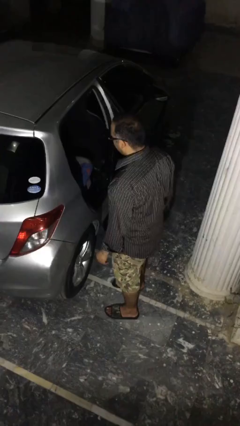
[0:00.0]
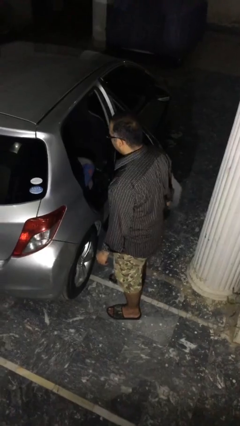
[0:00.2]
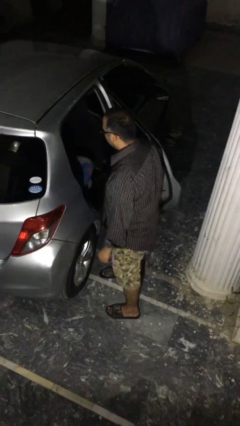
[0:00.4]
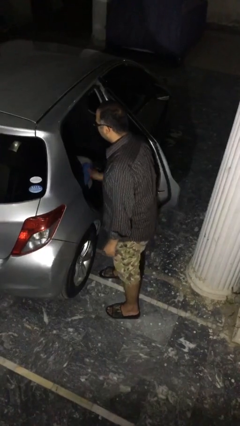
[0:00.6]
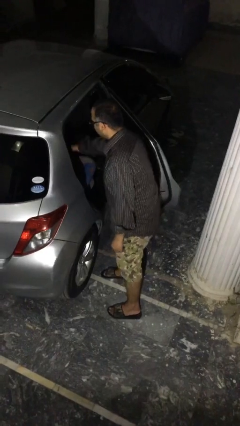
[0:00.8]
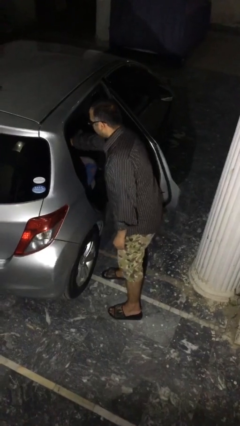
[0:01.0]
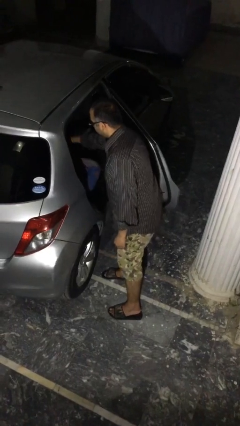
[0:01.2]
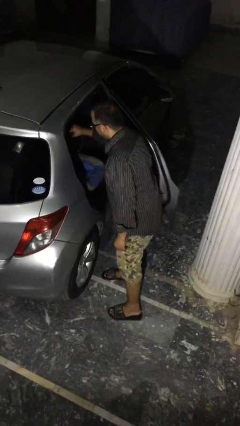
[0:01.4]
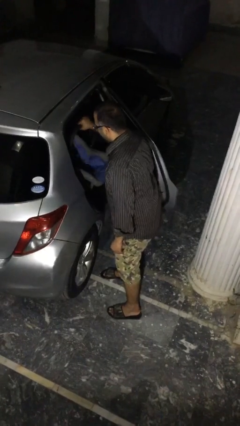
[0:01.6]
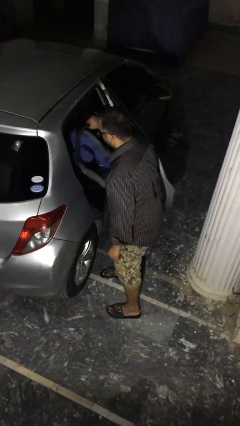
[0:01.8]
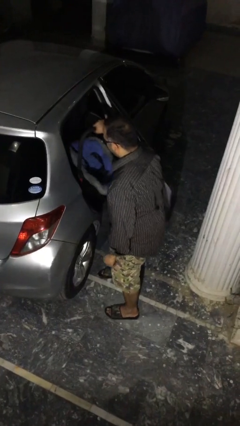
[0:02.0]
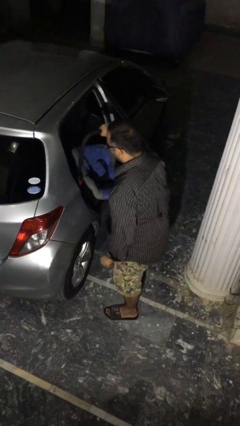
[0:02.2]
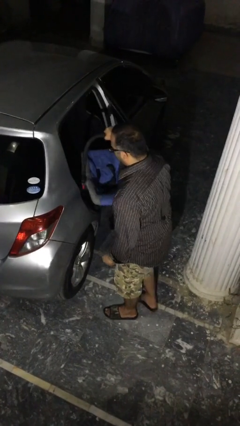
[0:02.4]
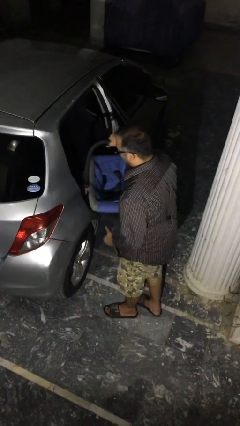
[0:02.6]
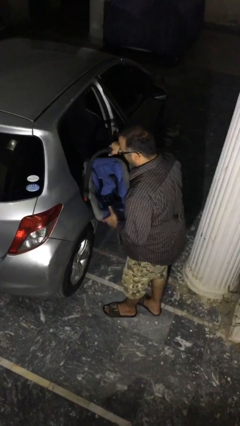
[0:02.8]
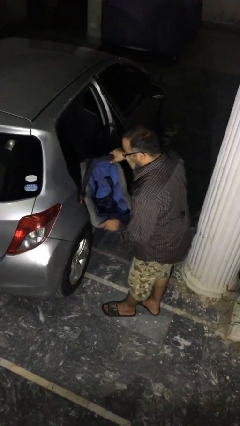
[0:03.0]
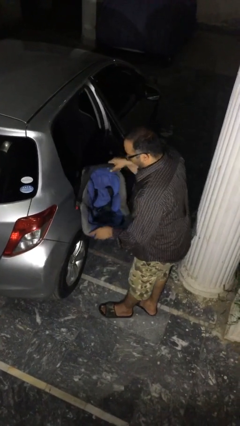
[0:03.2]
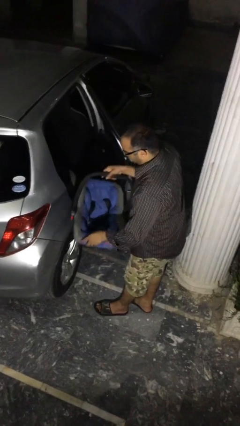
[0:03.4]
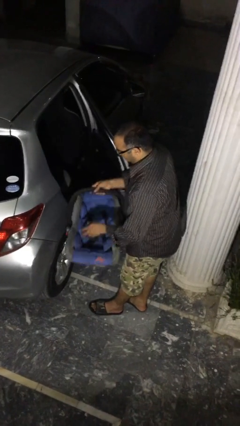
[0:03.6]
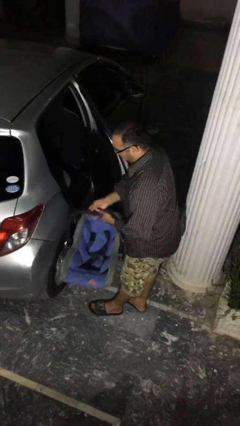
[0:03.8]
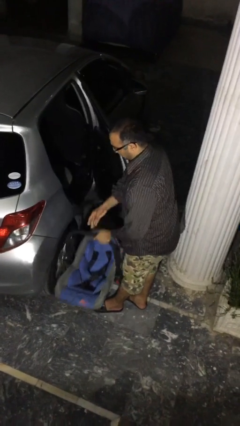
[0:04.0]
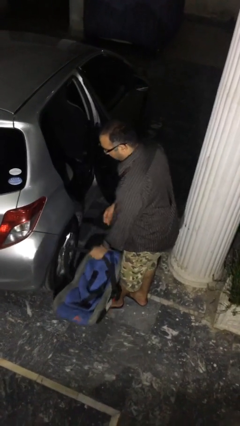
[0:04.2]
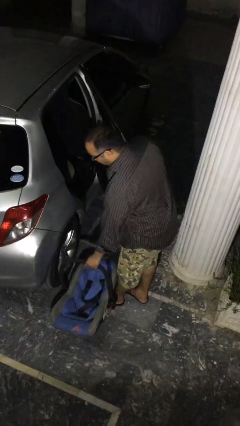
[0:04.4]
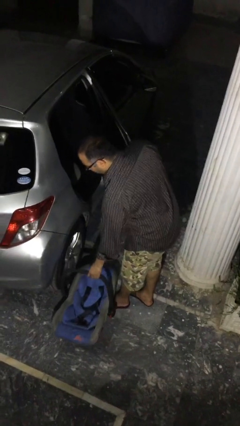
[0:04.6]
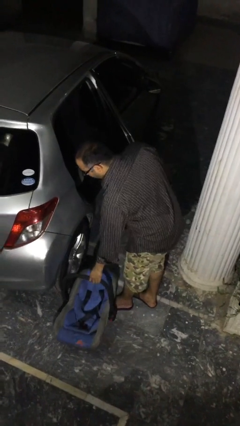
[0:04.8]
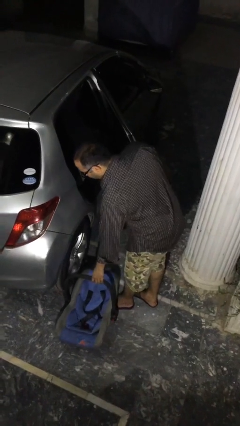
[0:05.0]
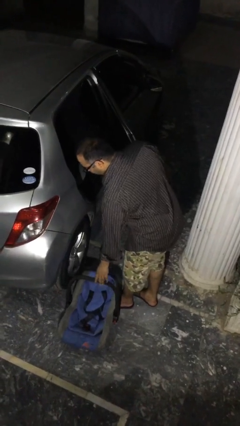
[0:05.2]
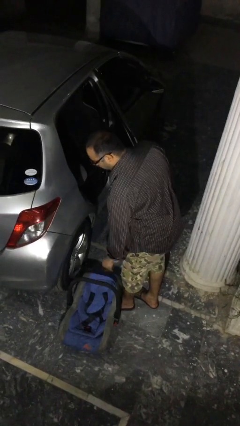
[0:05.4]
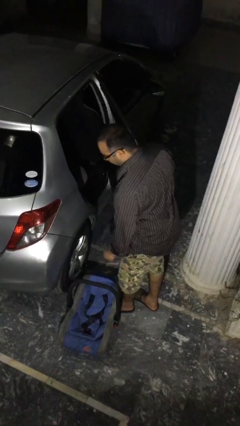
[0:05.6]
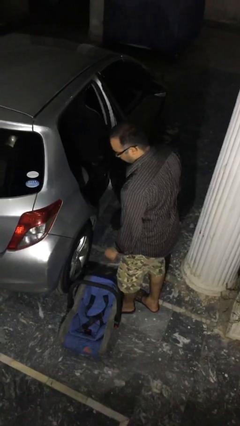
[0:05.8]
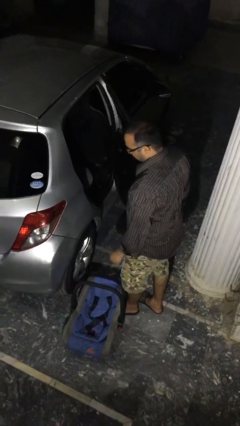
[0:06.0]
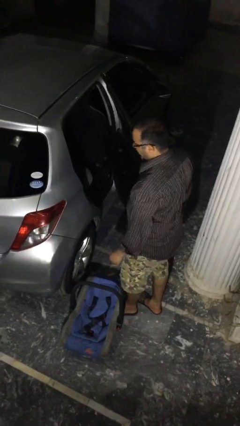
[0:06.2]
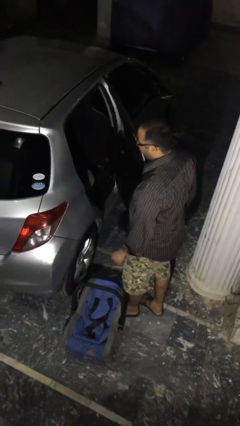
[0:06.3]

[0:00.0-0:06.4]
person unloads car

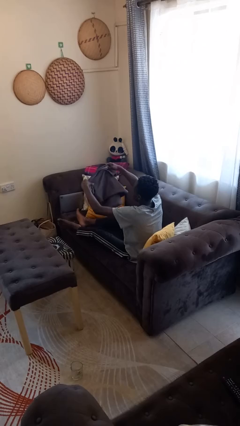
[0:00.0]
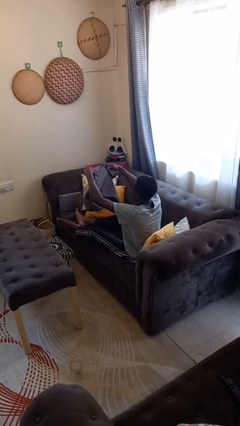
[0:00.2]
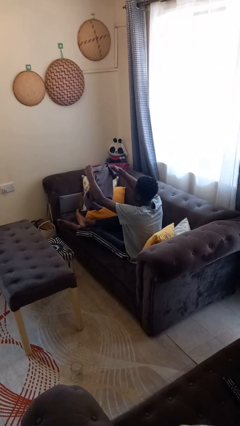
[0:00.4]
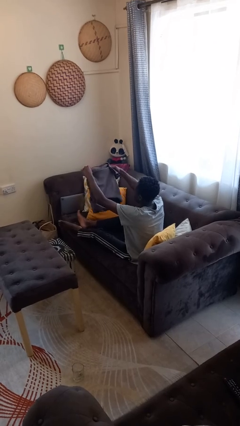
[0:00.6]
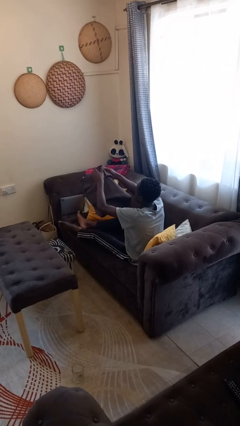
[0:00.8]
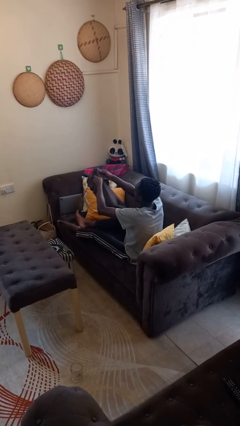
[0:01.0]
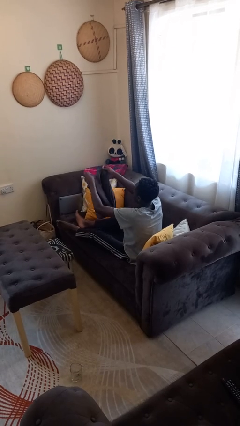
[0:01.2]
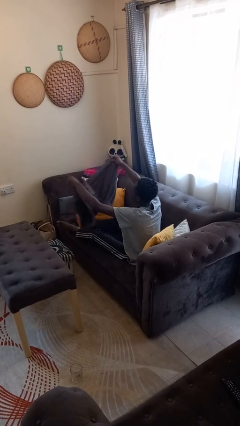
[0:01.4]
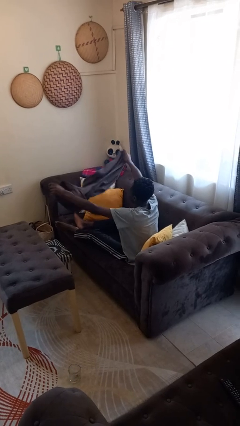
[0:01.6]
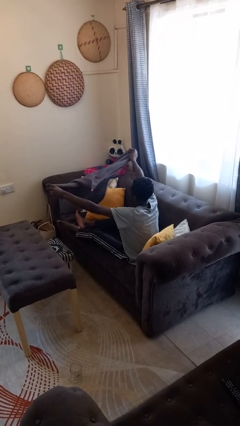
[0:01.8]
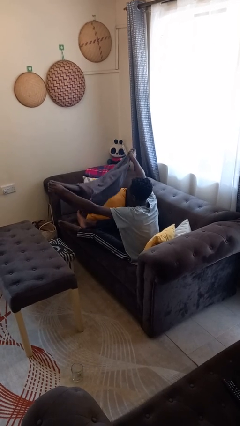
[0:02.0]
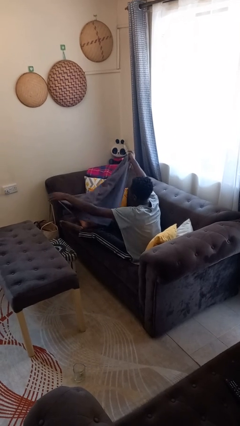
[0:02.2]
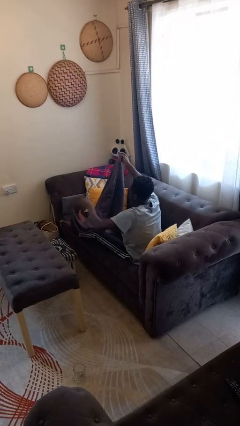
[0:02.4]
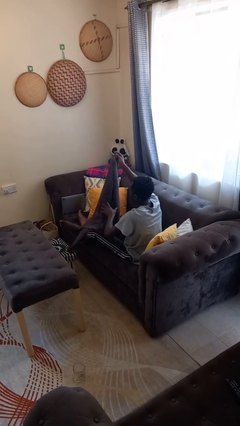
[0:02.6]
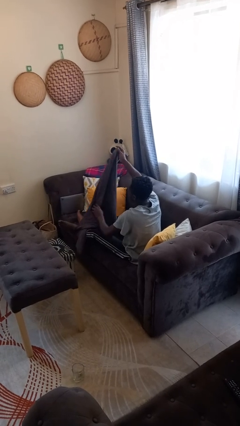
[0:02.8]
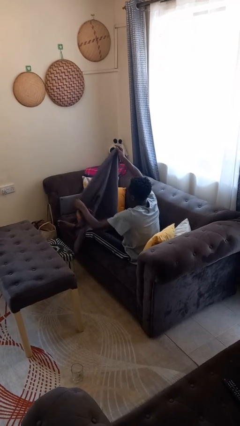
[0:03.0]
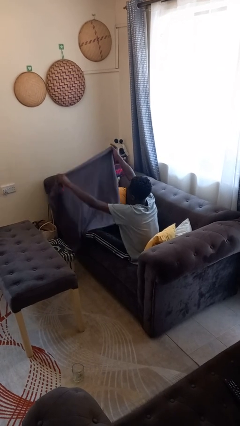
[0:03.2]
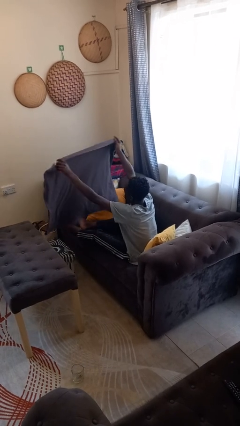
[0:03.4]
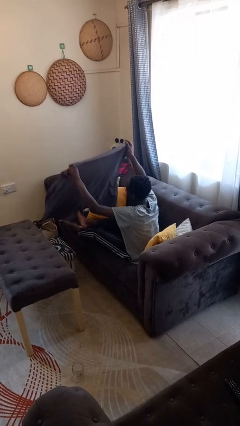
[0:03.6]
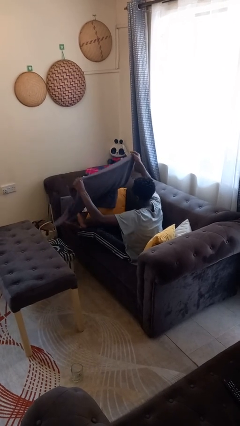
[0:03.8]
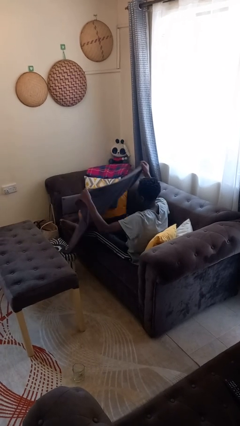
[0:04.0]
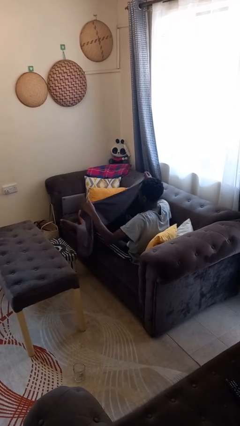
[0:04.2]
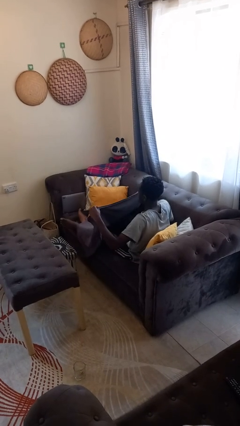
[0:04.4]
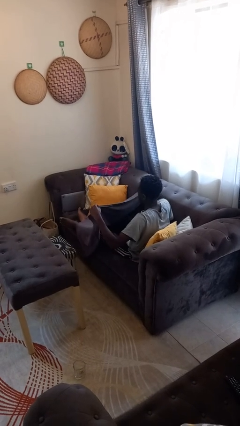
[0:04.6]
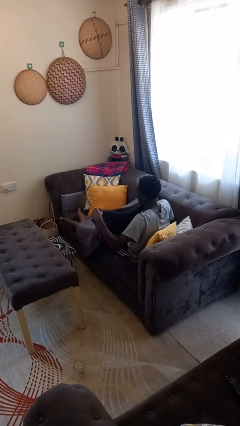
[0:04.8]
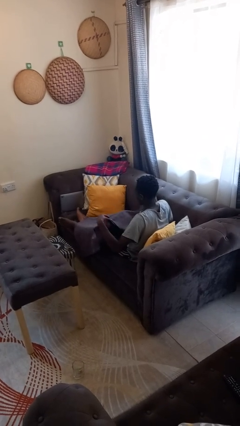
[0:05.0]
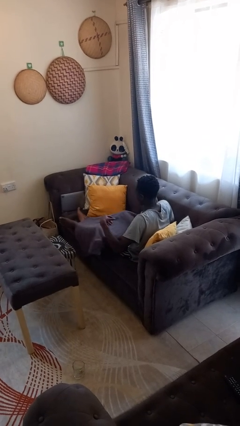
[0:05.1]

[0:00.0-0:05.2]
person unfolds blanket

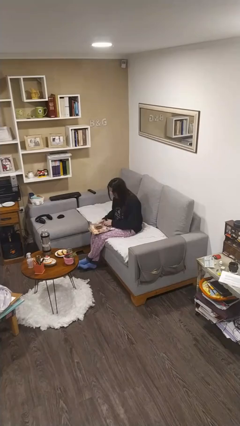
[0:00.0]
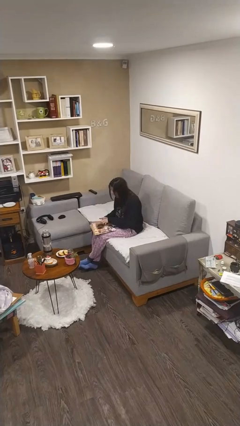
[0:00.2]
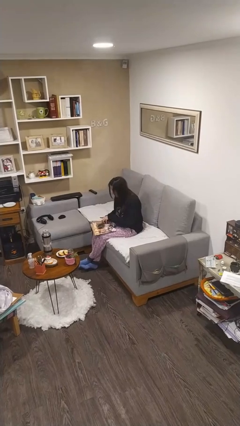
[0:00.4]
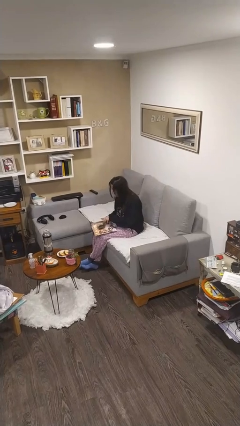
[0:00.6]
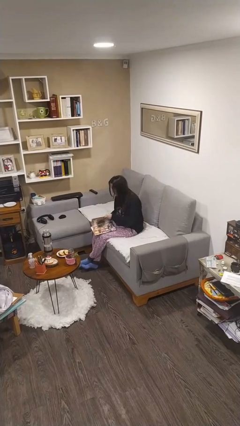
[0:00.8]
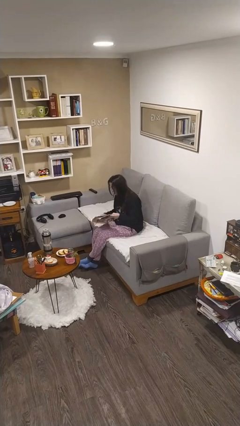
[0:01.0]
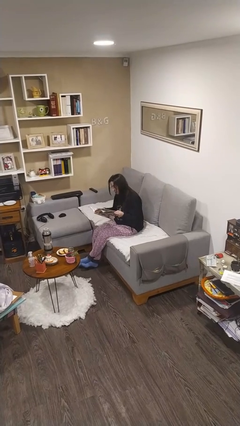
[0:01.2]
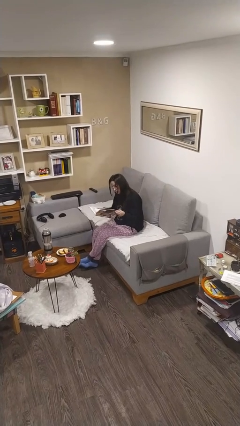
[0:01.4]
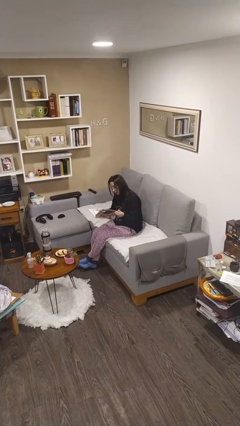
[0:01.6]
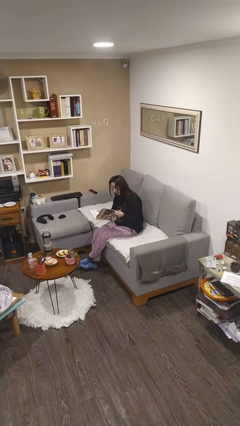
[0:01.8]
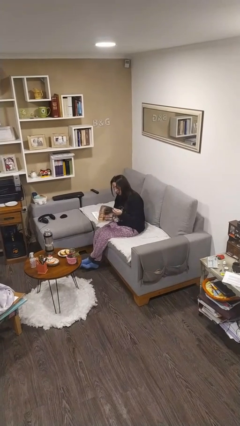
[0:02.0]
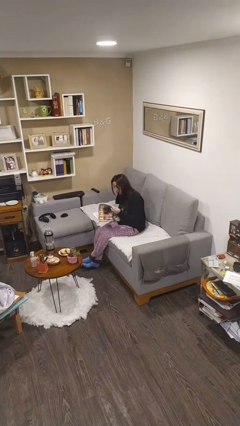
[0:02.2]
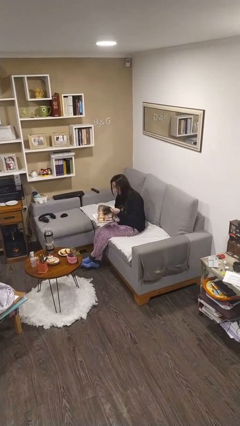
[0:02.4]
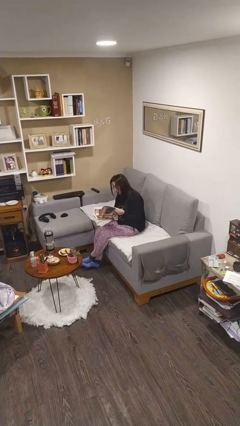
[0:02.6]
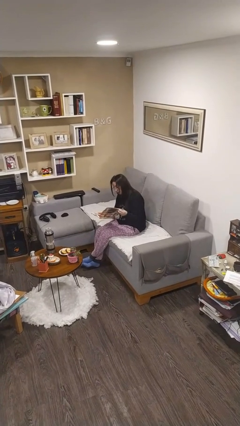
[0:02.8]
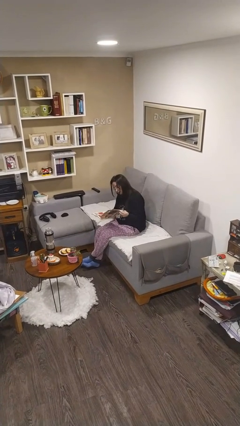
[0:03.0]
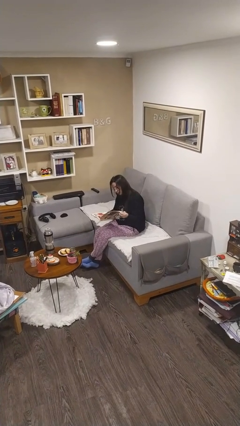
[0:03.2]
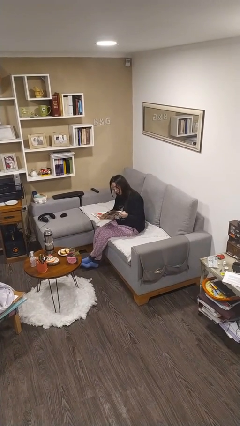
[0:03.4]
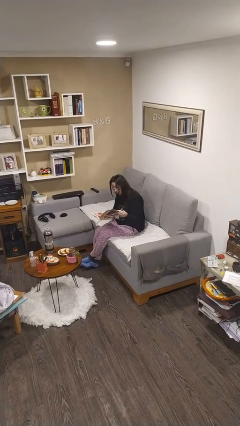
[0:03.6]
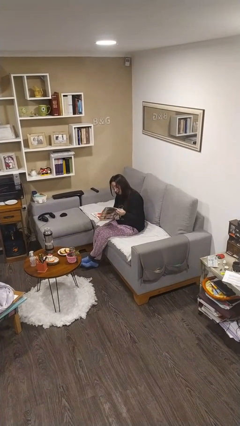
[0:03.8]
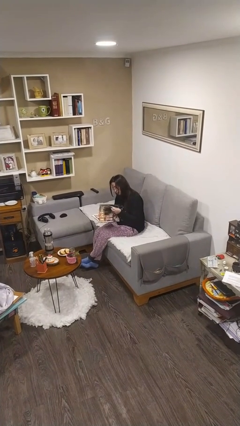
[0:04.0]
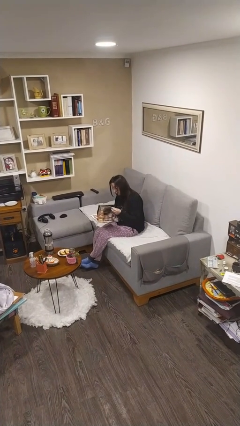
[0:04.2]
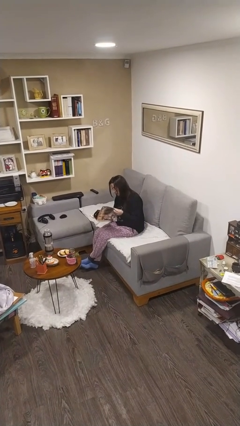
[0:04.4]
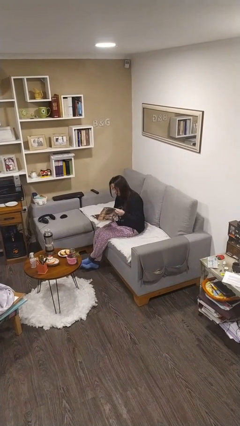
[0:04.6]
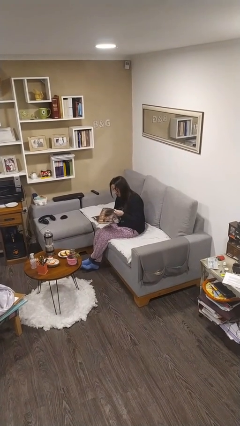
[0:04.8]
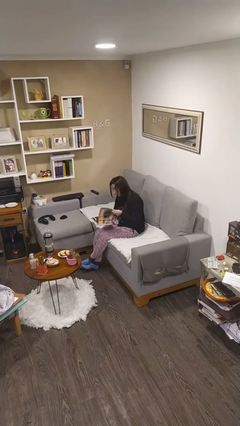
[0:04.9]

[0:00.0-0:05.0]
person reads magazine

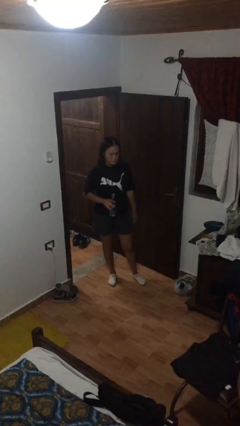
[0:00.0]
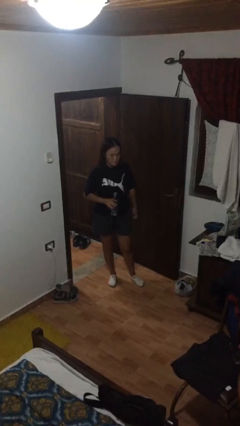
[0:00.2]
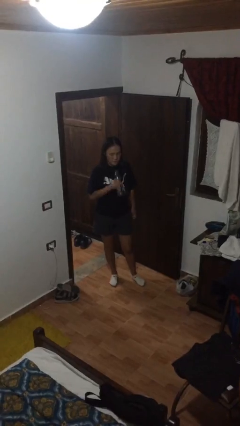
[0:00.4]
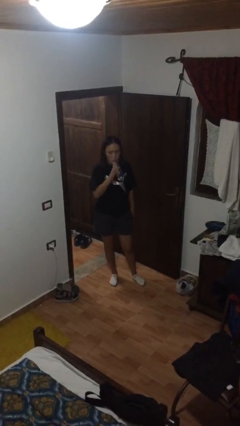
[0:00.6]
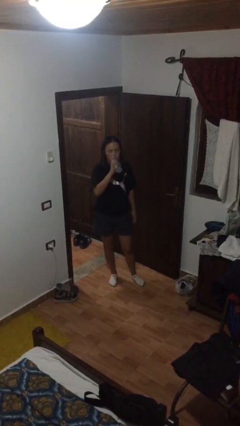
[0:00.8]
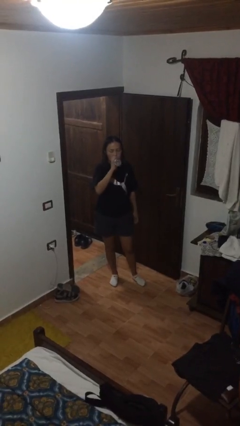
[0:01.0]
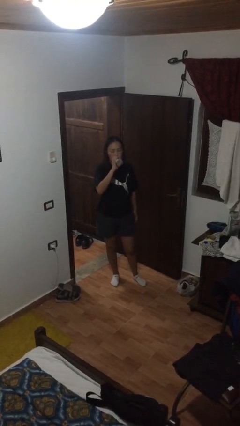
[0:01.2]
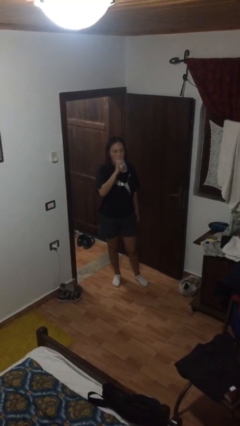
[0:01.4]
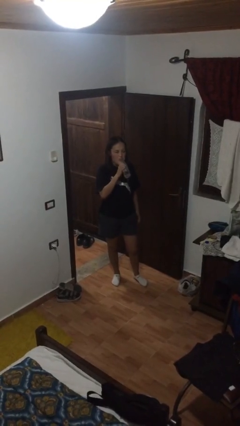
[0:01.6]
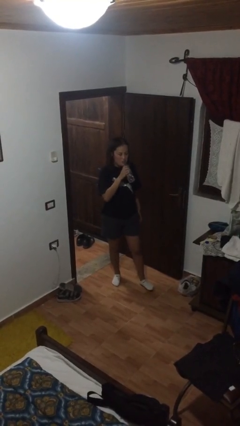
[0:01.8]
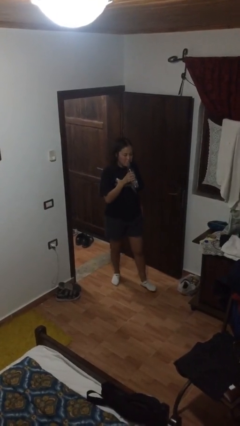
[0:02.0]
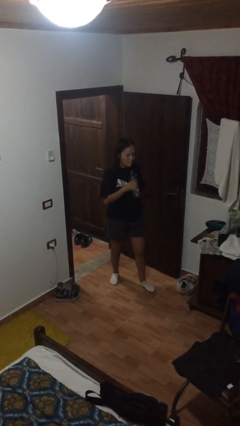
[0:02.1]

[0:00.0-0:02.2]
person drinks from bottle
